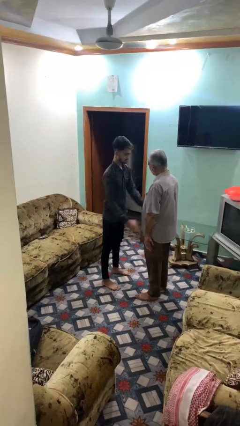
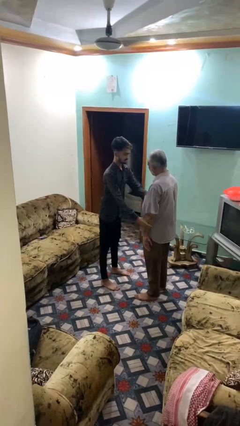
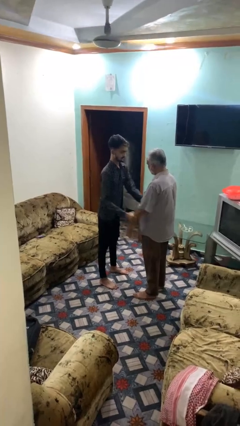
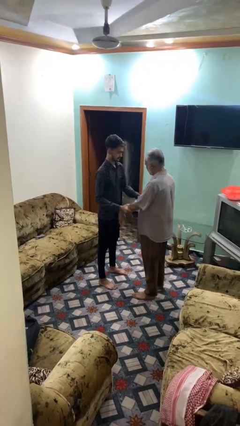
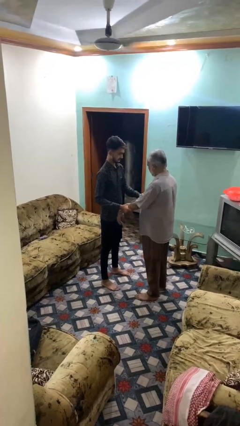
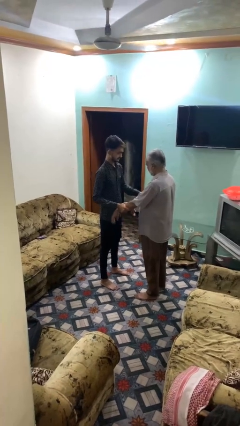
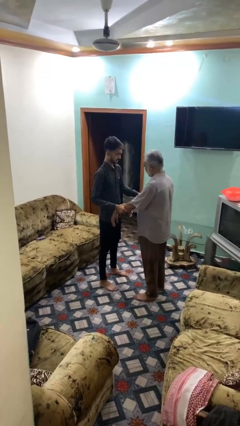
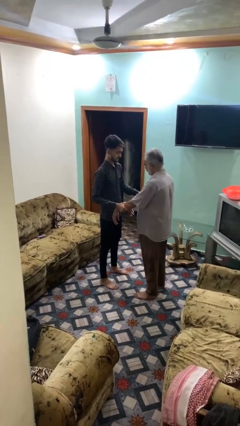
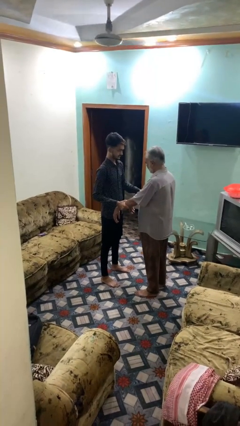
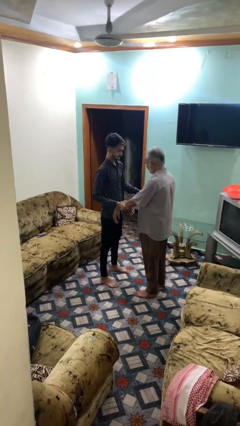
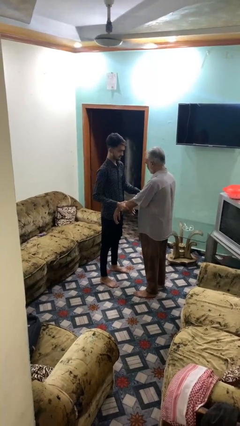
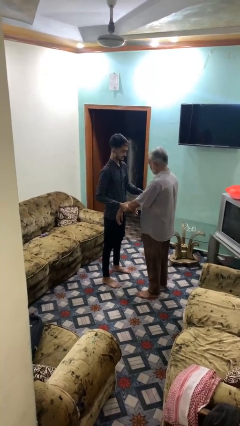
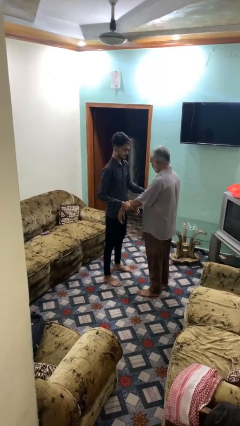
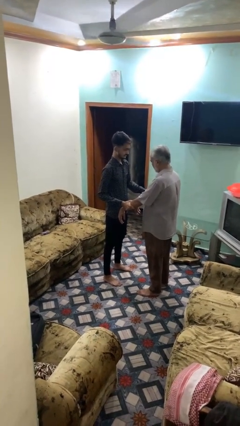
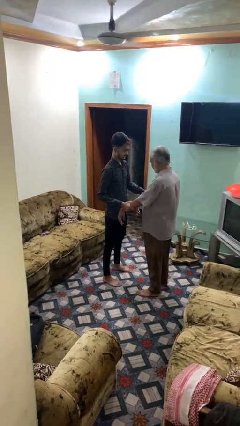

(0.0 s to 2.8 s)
person grabs person by forearm

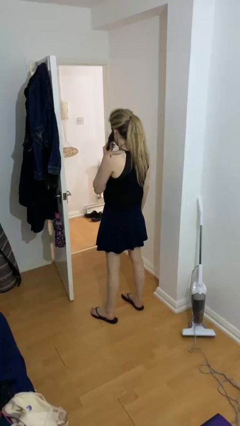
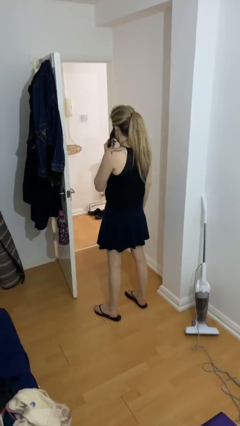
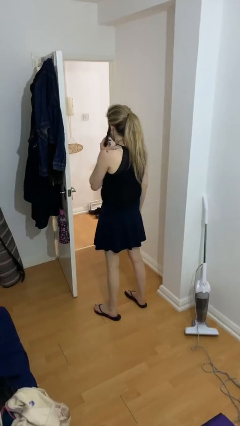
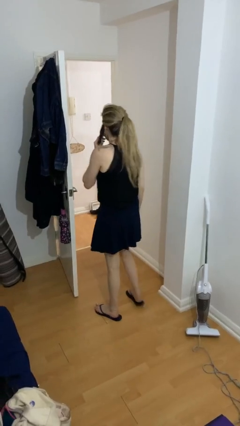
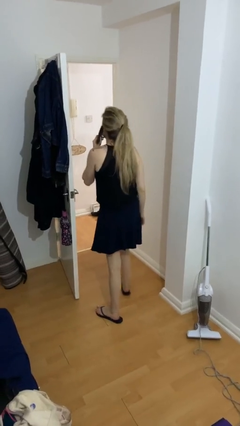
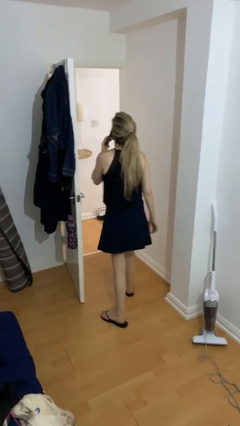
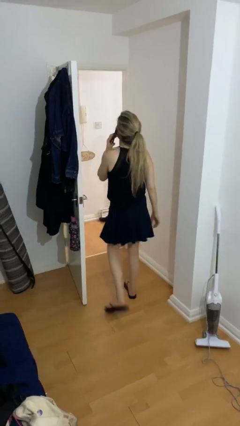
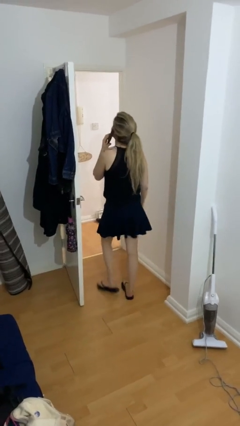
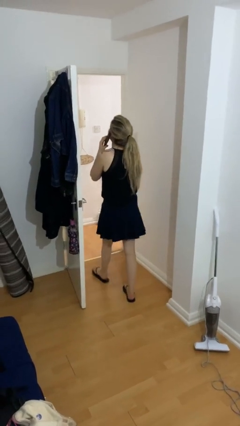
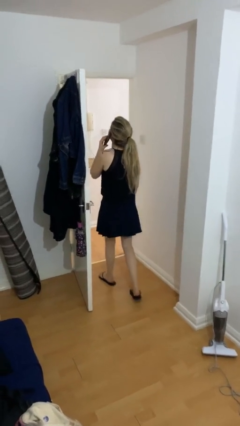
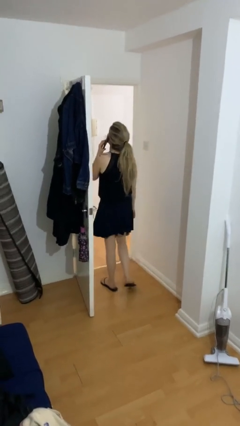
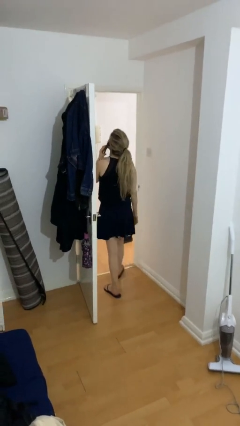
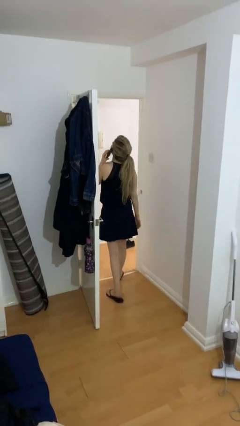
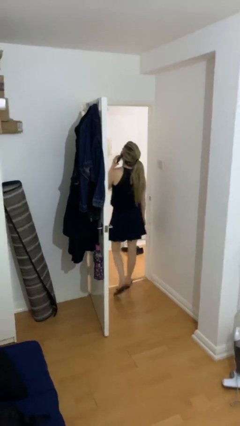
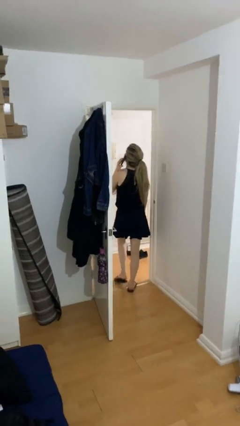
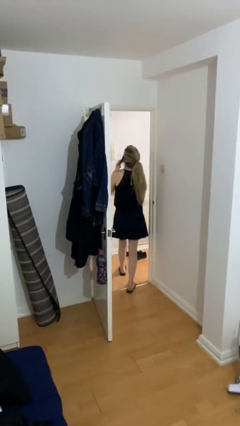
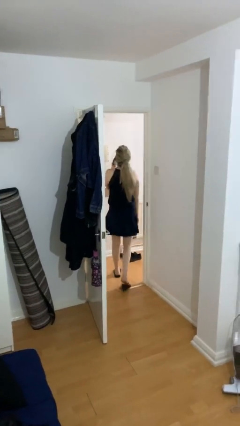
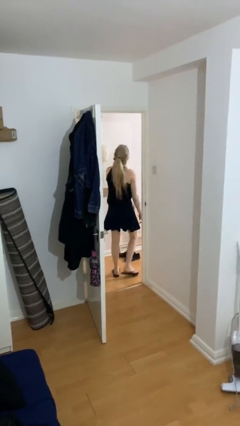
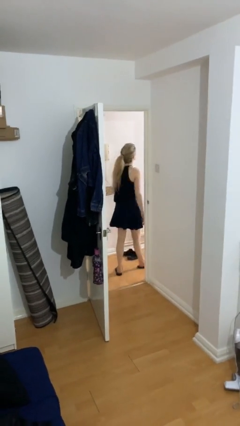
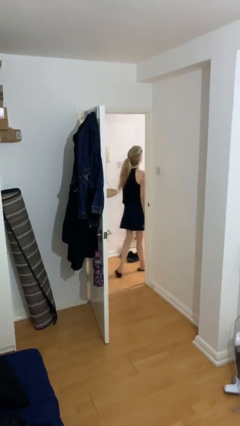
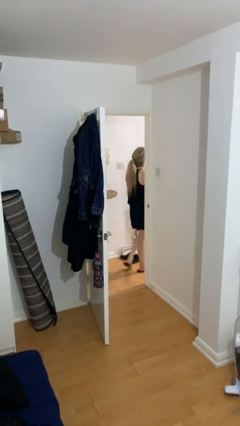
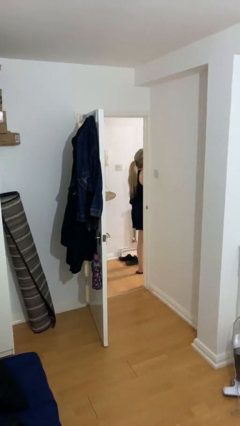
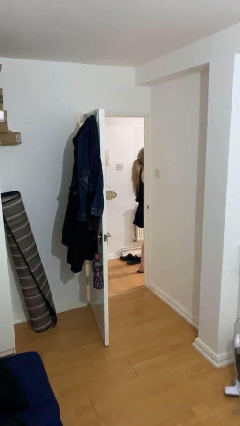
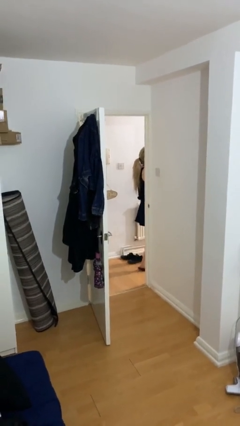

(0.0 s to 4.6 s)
person exits scene through structure

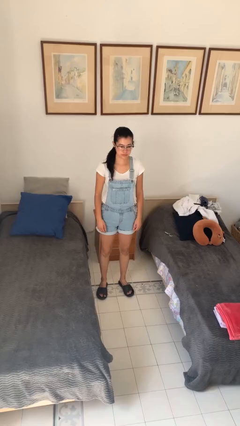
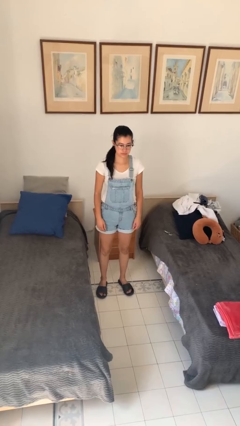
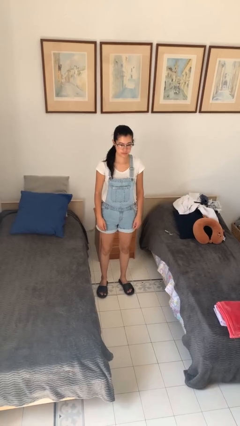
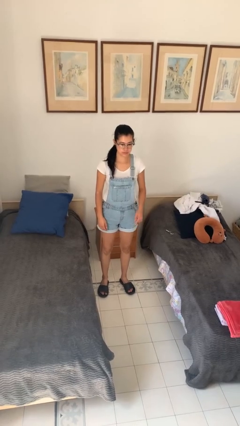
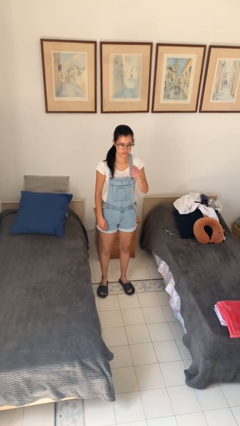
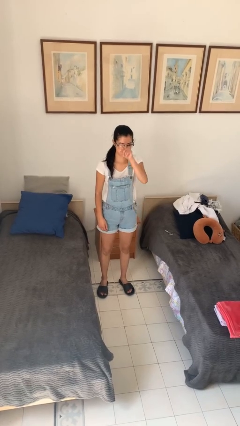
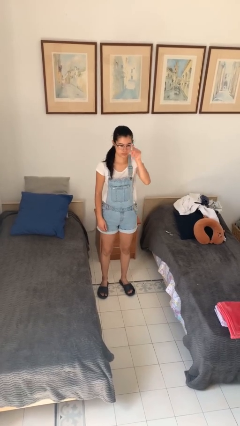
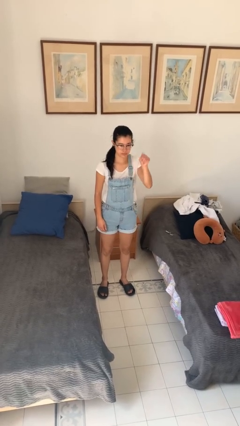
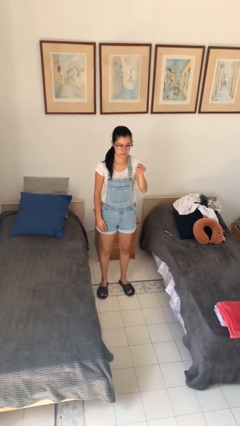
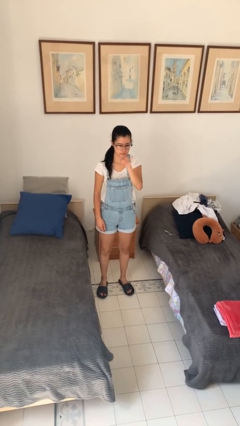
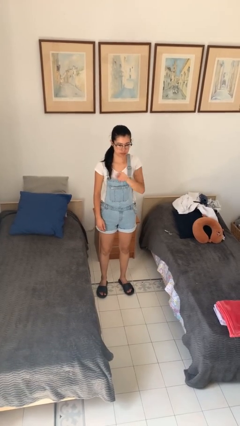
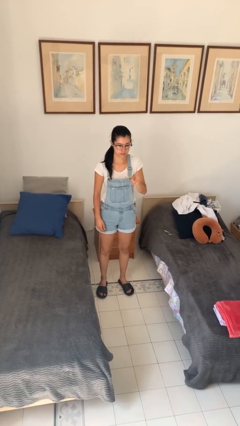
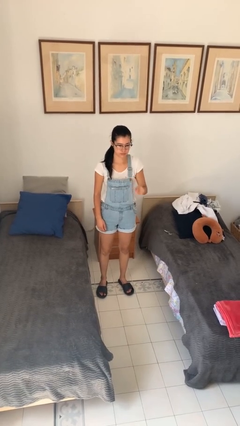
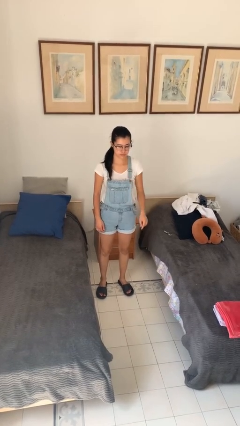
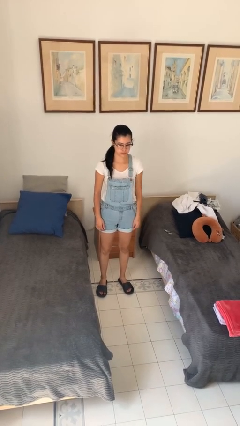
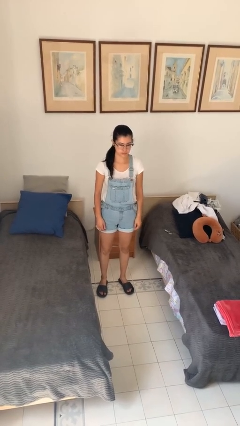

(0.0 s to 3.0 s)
person gestures number five

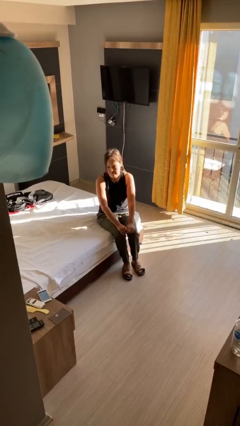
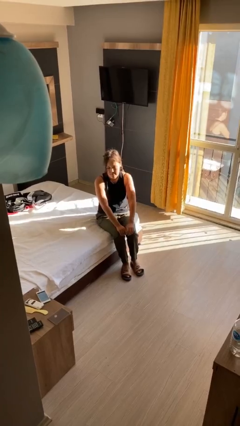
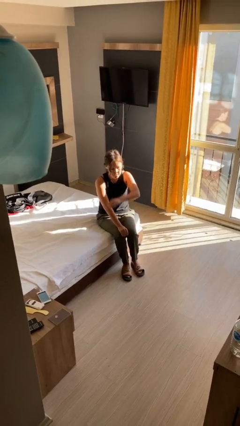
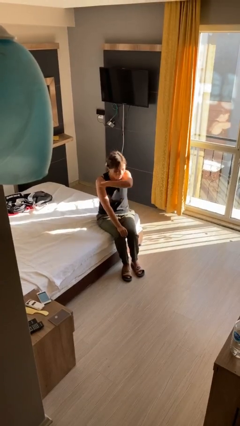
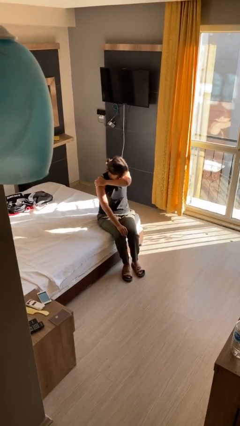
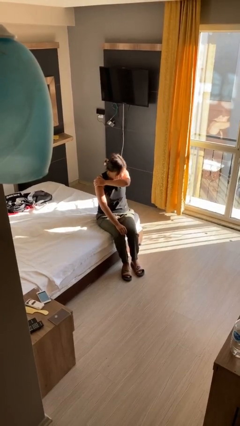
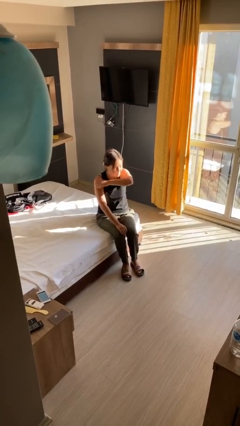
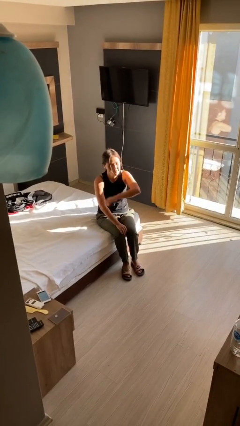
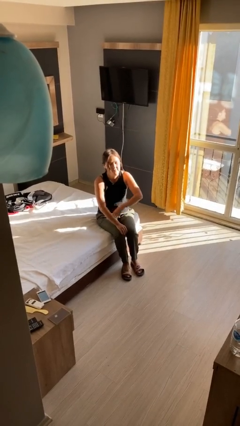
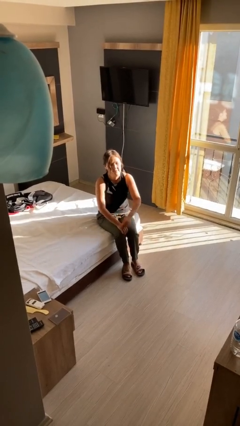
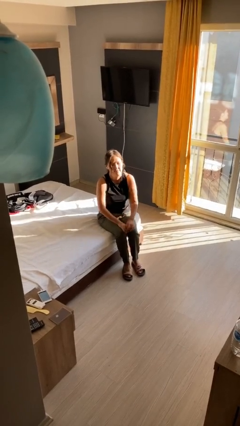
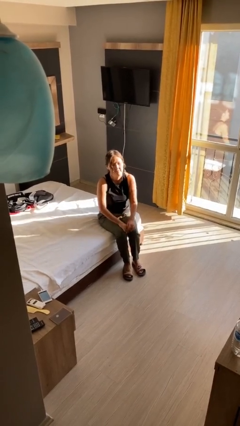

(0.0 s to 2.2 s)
person sneezes into hand

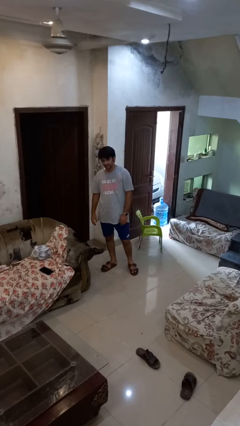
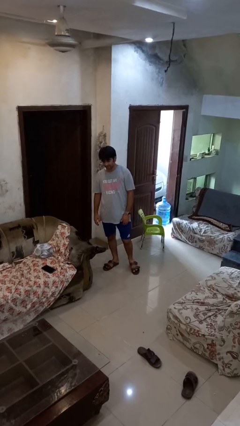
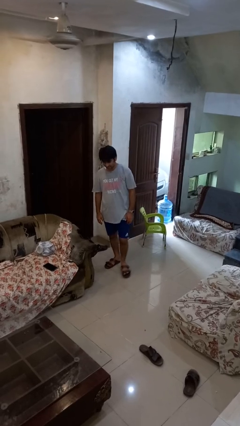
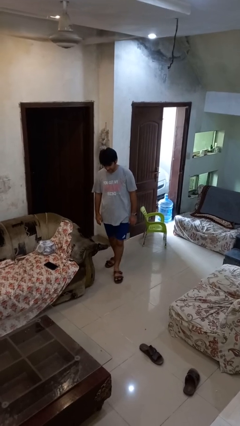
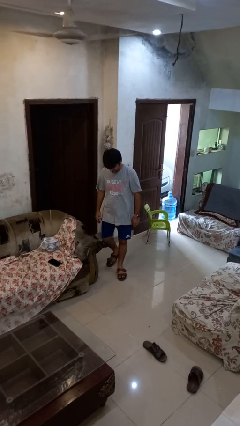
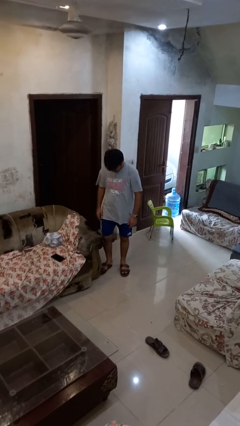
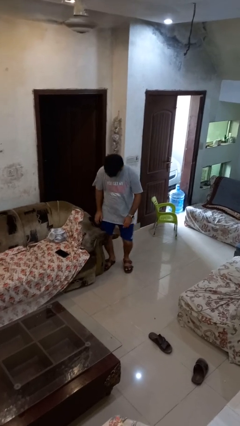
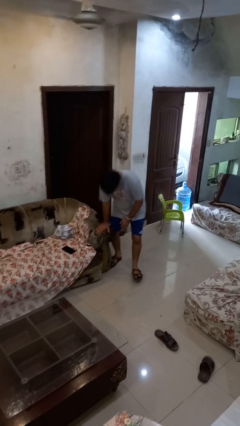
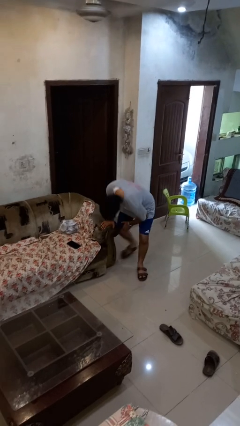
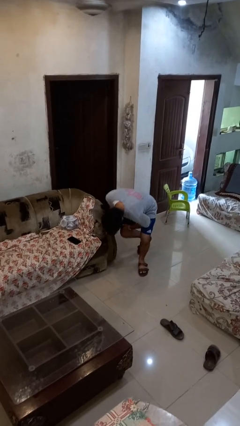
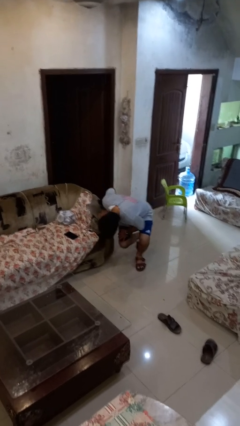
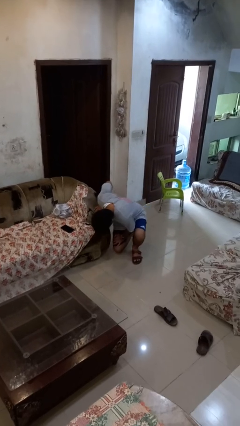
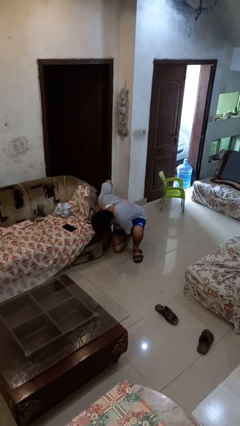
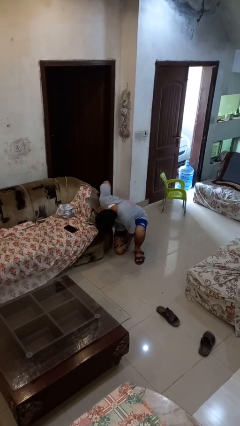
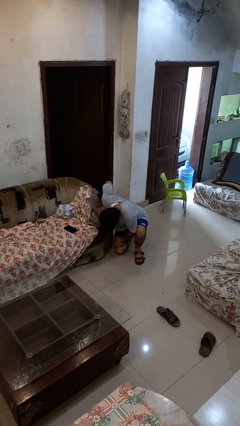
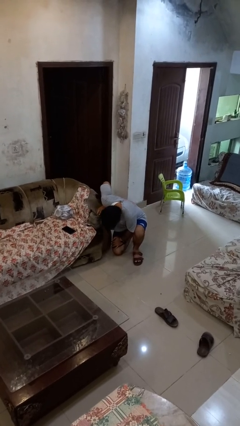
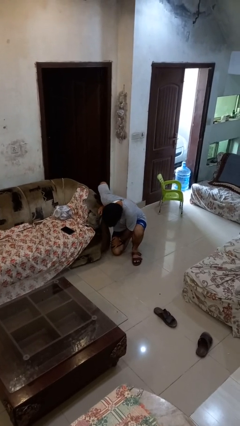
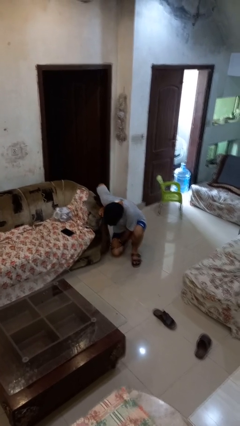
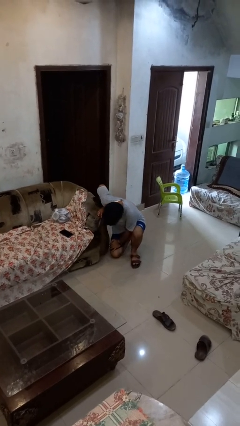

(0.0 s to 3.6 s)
person trips on object on floor

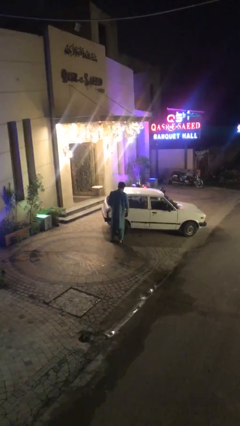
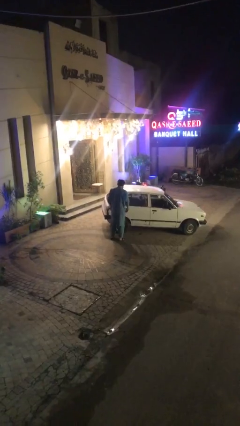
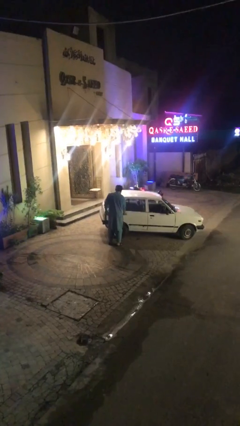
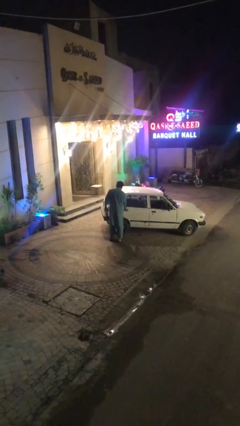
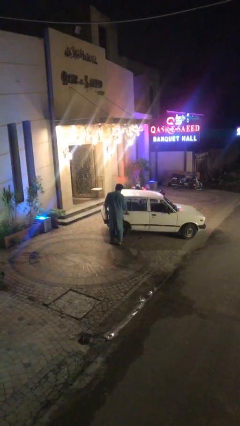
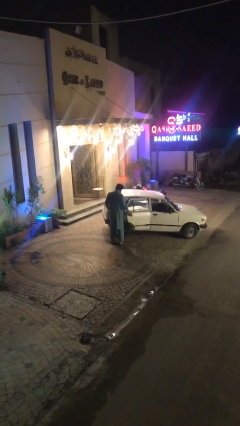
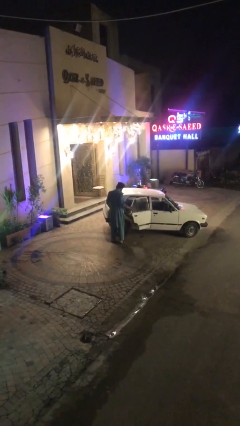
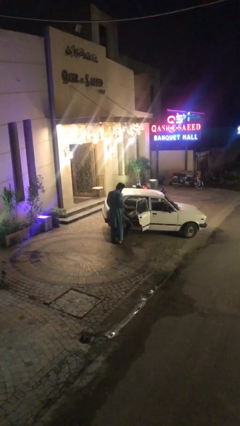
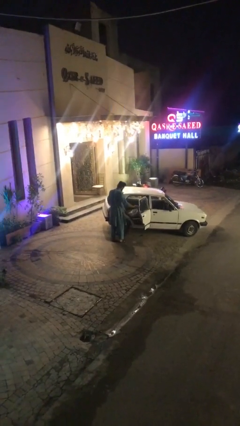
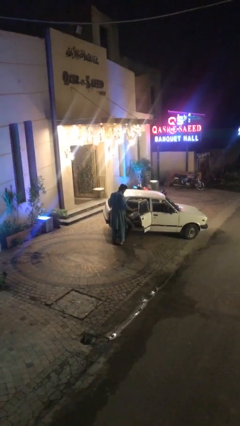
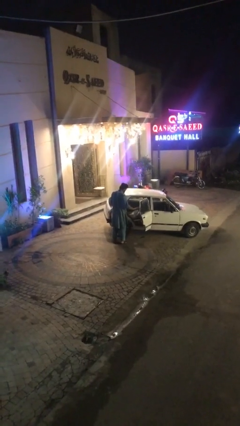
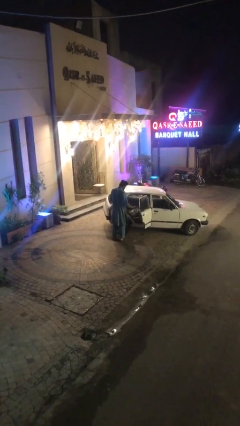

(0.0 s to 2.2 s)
person opens car door
